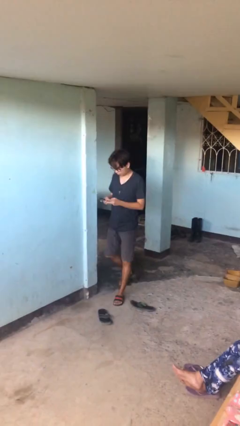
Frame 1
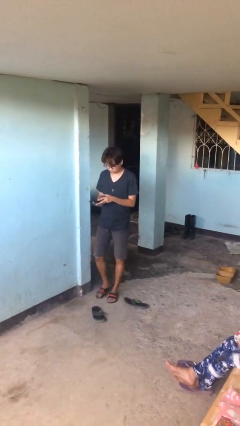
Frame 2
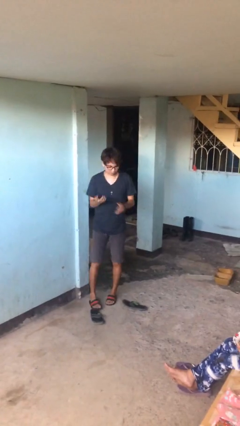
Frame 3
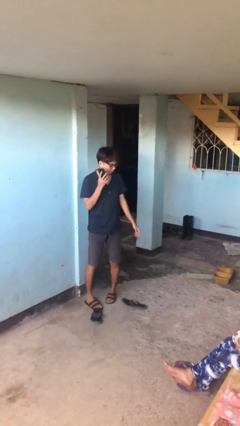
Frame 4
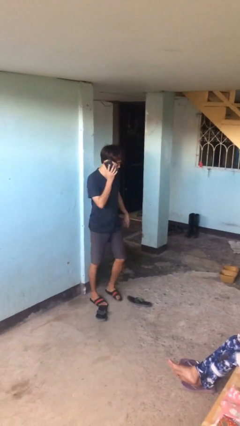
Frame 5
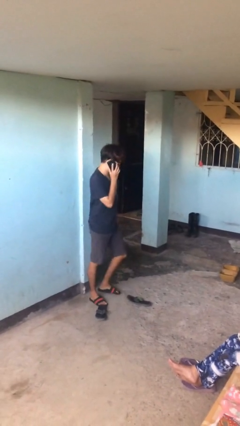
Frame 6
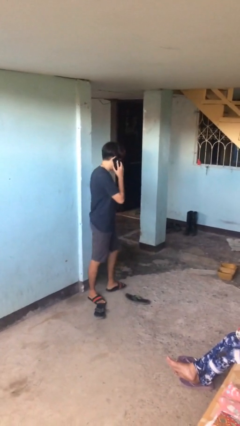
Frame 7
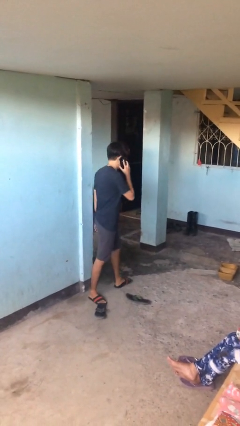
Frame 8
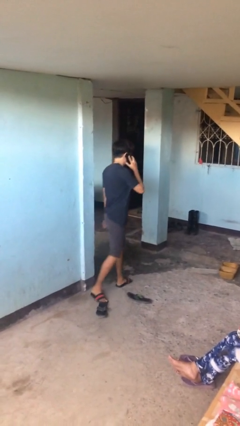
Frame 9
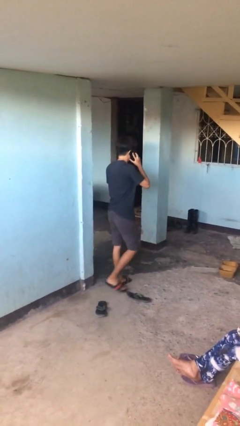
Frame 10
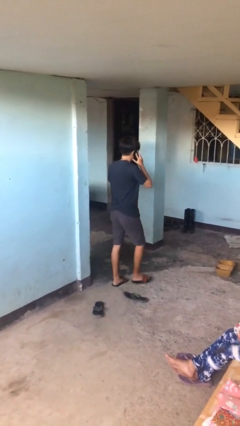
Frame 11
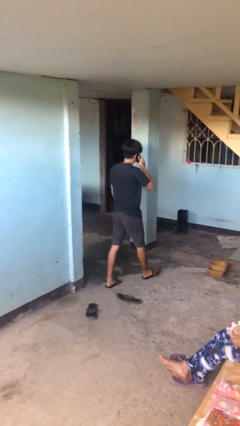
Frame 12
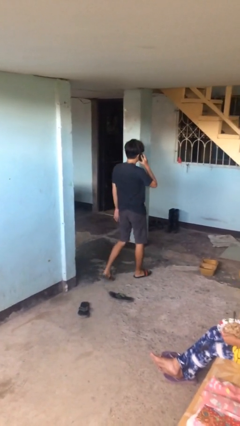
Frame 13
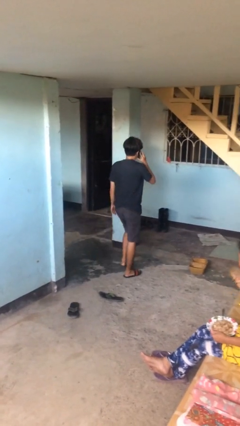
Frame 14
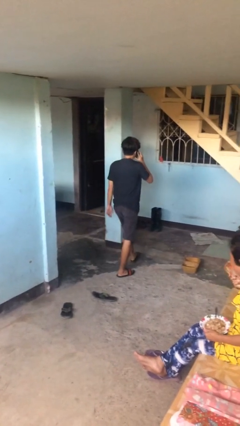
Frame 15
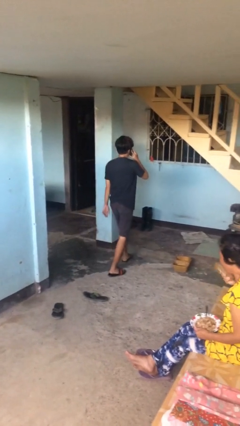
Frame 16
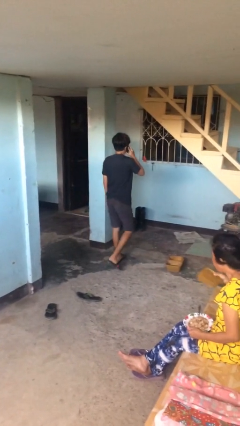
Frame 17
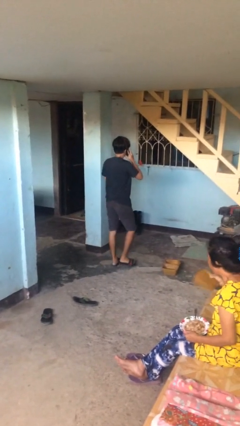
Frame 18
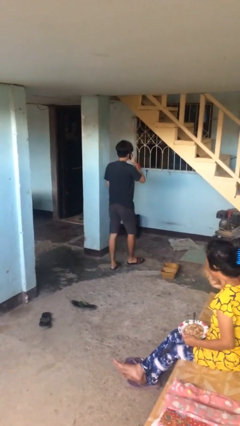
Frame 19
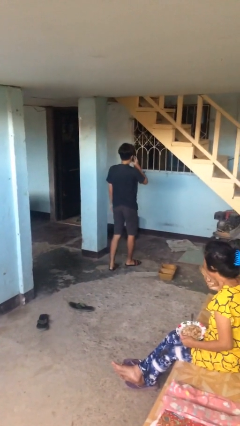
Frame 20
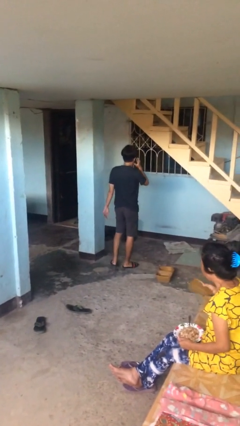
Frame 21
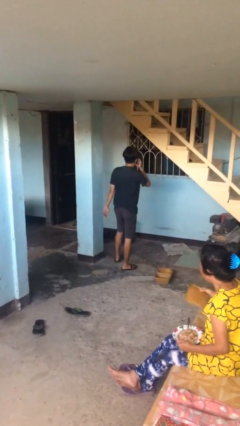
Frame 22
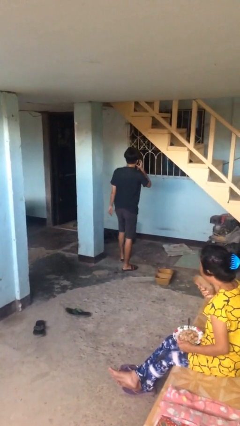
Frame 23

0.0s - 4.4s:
person talks on phone

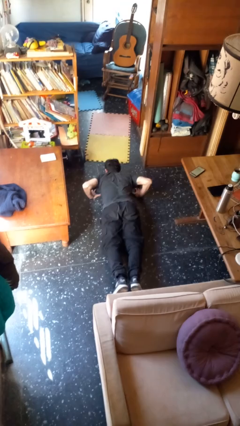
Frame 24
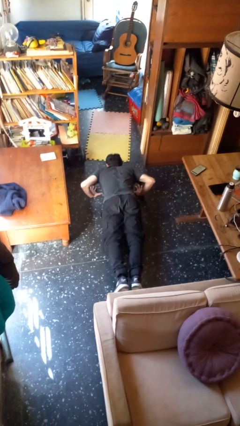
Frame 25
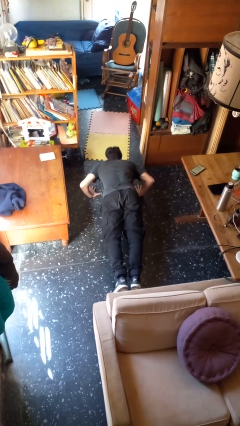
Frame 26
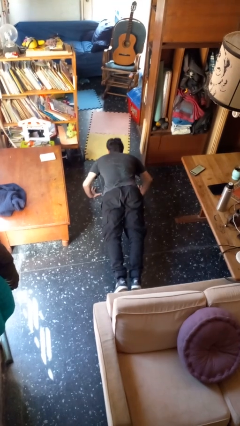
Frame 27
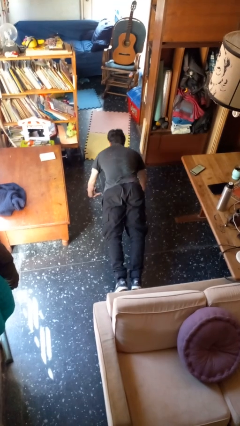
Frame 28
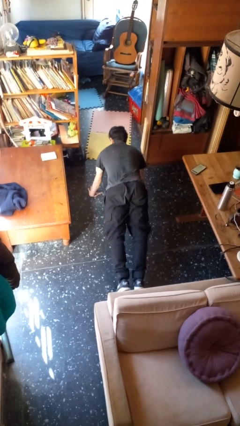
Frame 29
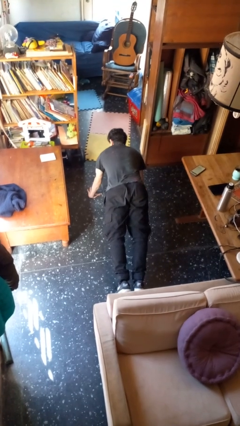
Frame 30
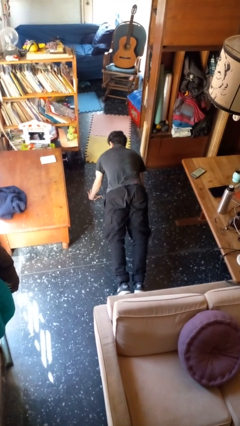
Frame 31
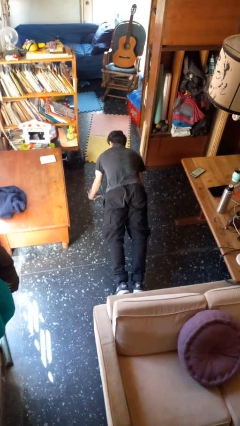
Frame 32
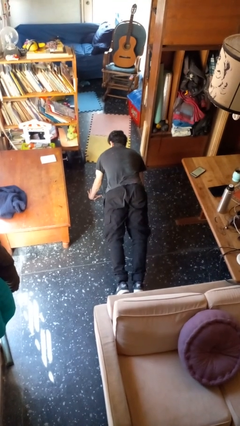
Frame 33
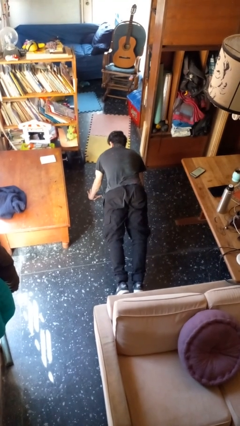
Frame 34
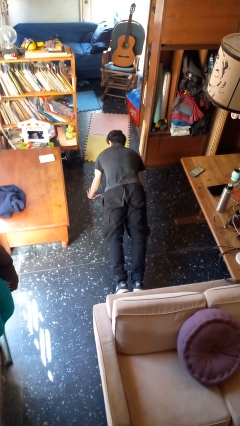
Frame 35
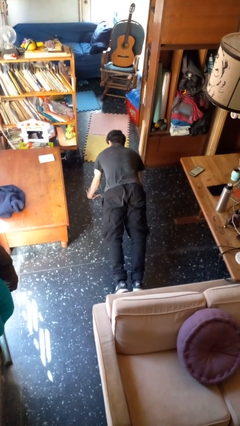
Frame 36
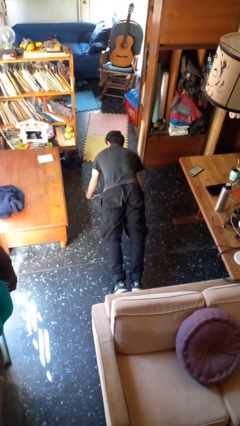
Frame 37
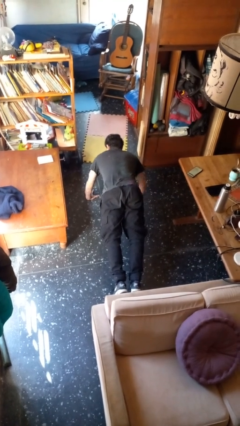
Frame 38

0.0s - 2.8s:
person exercises with pushup

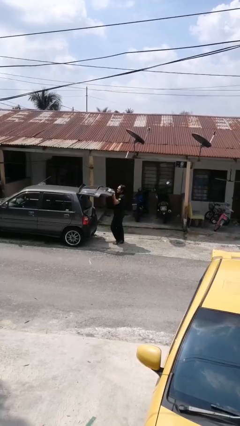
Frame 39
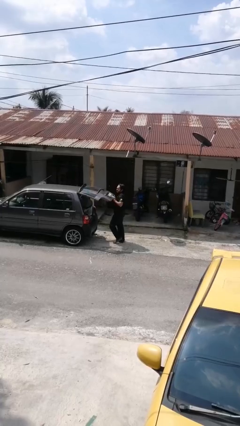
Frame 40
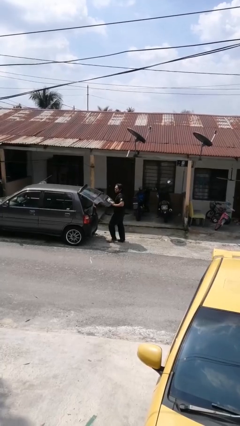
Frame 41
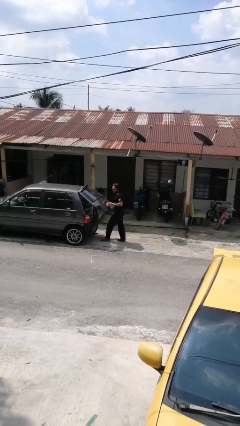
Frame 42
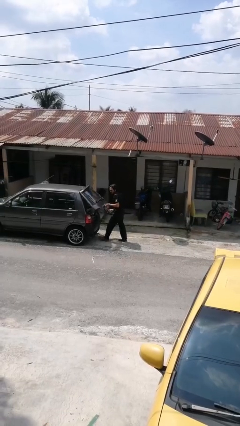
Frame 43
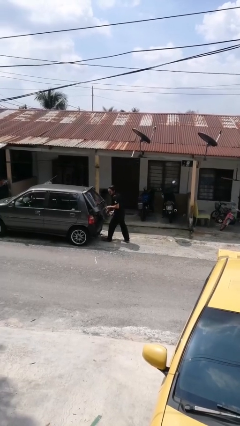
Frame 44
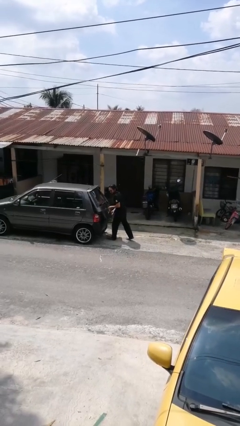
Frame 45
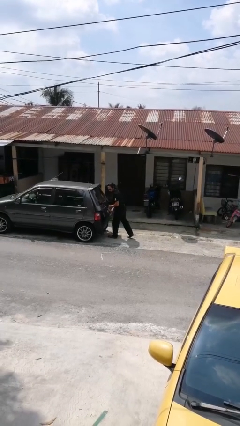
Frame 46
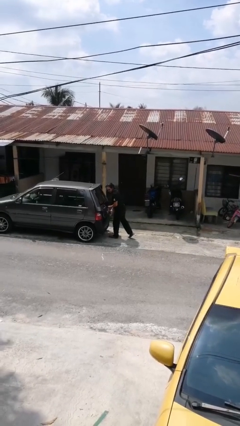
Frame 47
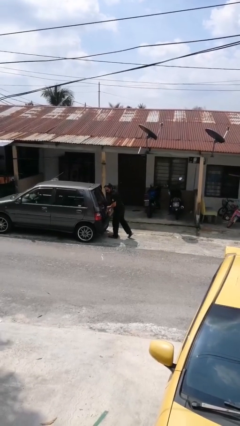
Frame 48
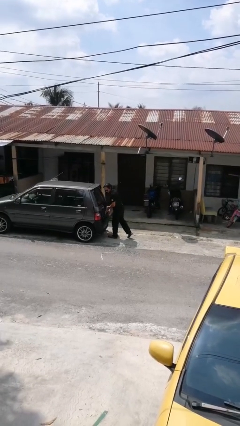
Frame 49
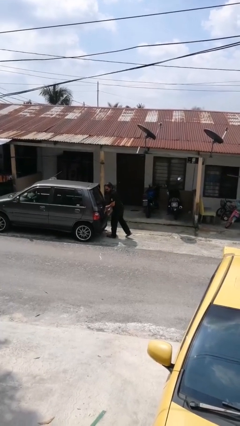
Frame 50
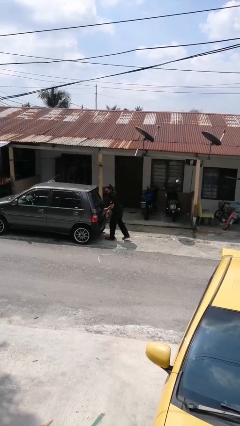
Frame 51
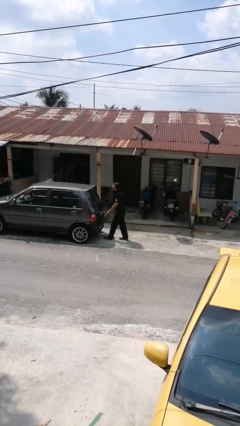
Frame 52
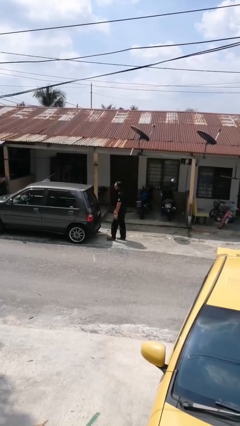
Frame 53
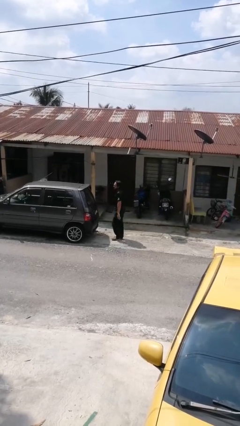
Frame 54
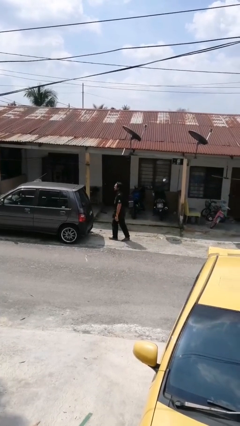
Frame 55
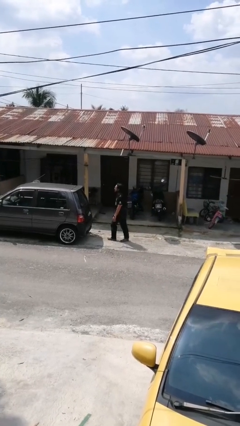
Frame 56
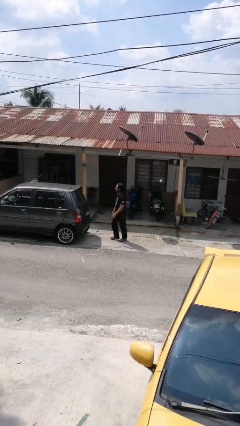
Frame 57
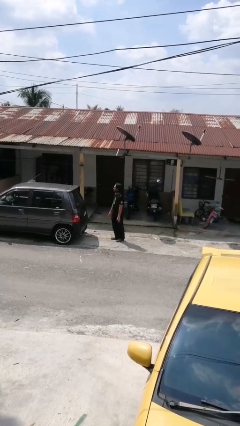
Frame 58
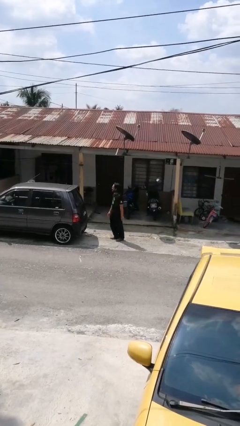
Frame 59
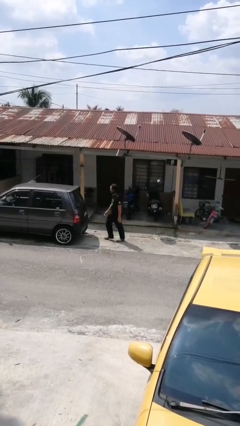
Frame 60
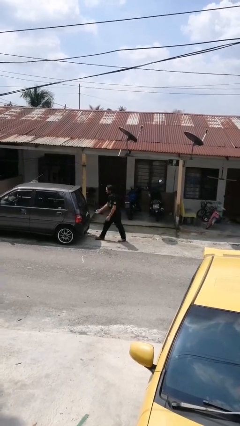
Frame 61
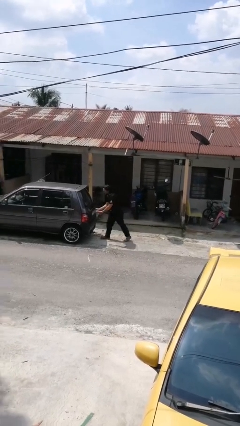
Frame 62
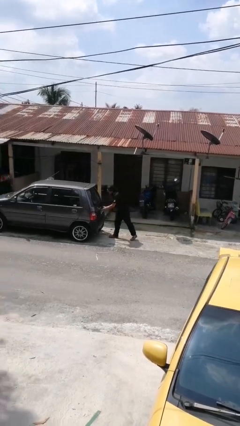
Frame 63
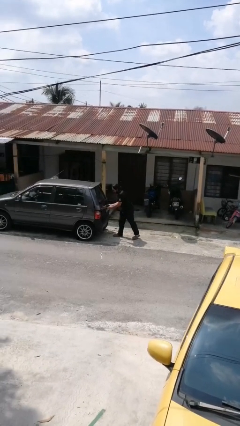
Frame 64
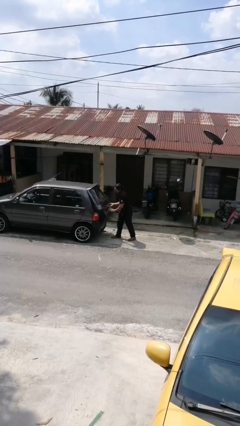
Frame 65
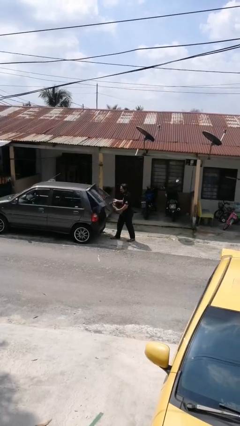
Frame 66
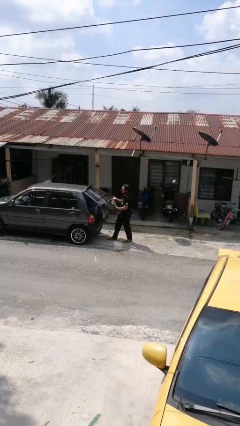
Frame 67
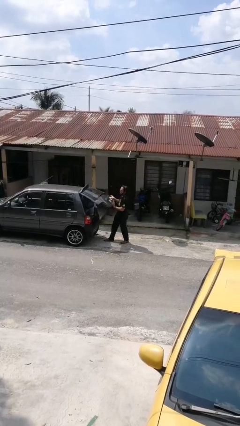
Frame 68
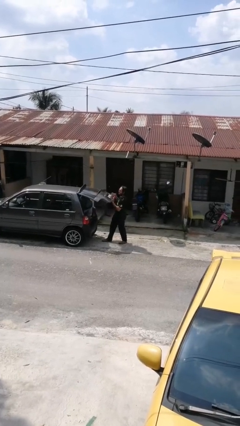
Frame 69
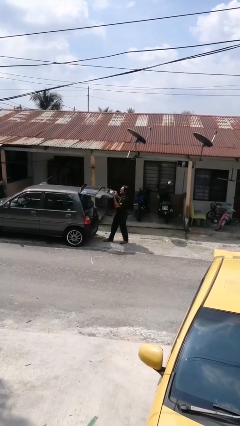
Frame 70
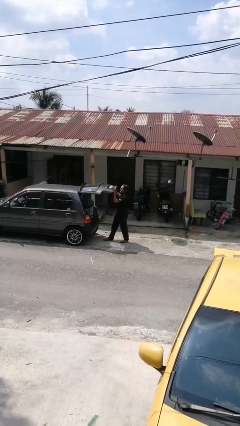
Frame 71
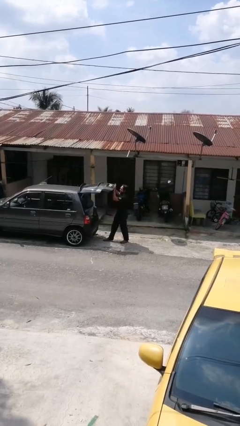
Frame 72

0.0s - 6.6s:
person opens car trunk

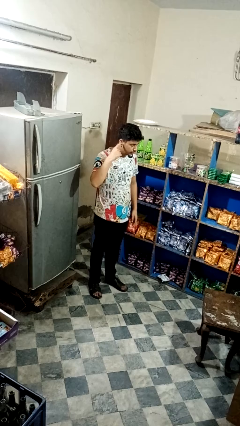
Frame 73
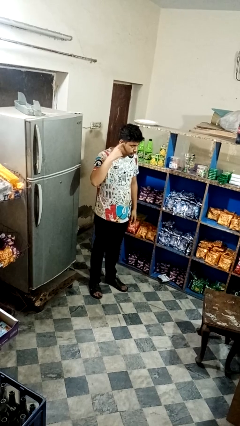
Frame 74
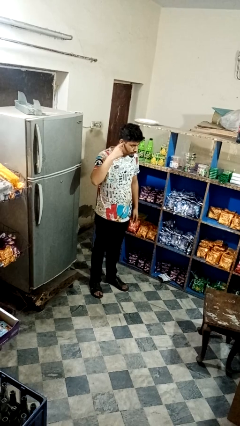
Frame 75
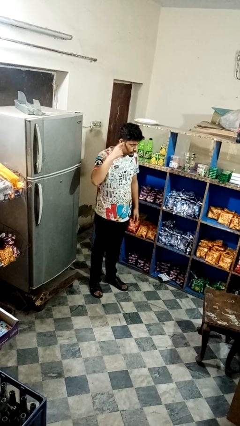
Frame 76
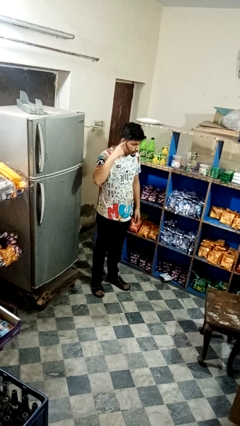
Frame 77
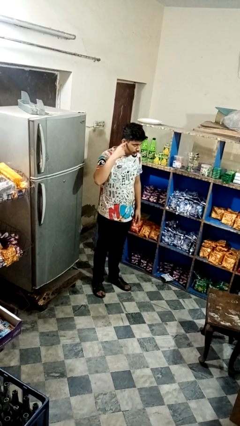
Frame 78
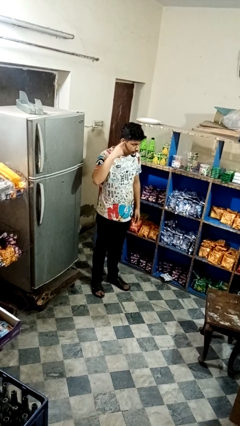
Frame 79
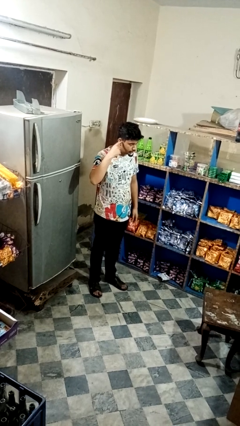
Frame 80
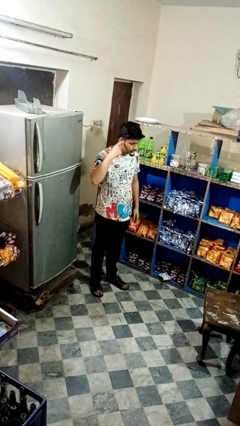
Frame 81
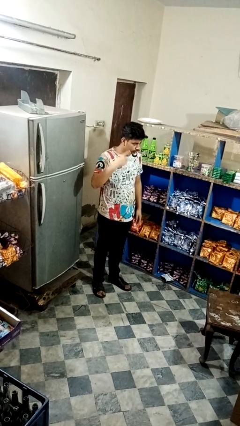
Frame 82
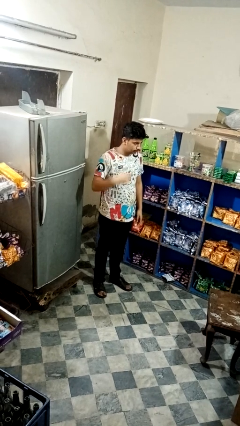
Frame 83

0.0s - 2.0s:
person gestures listen closely

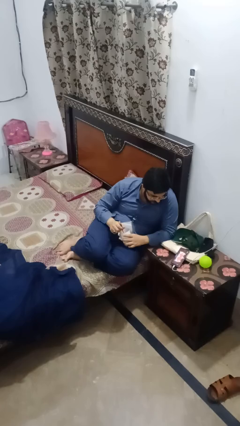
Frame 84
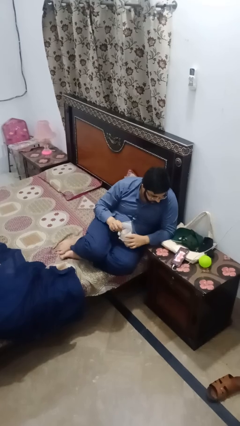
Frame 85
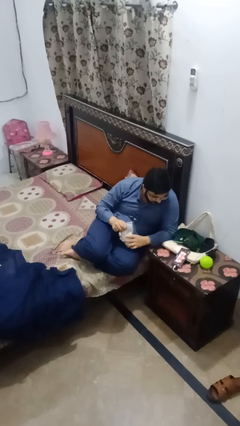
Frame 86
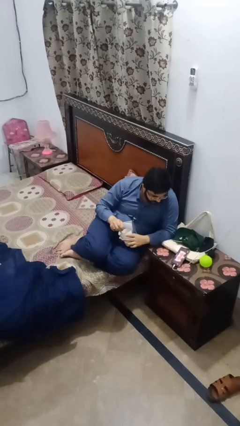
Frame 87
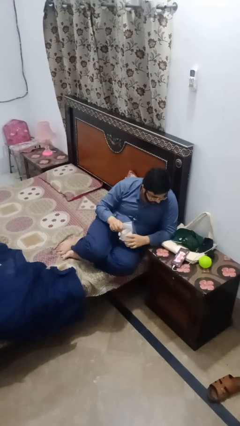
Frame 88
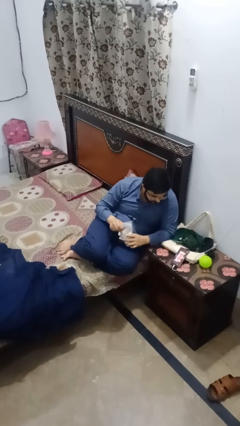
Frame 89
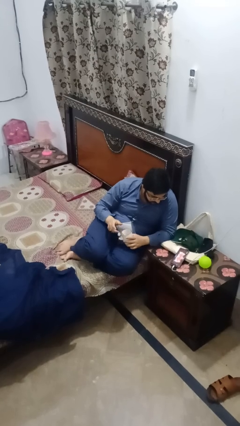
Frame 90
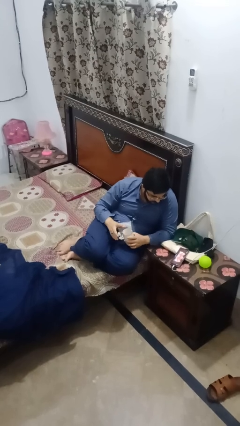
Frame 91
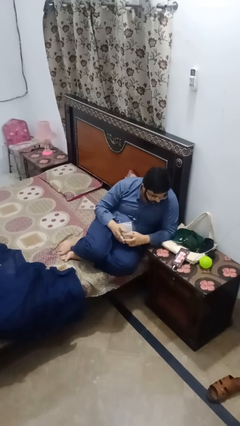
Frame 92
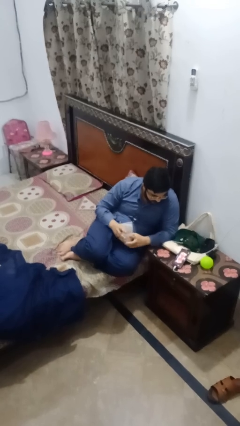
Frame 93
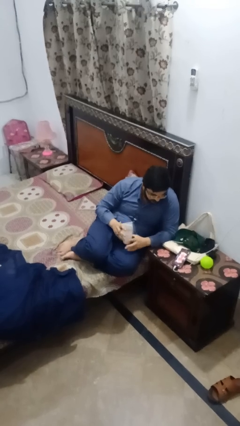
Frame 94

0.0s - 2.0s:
person stirs mug
